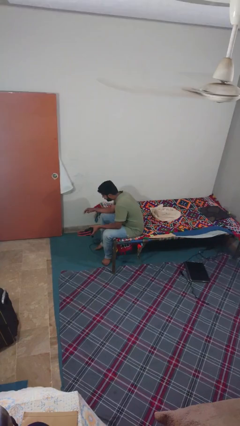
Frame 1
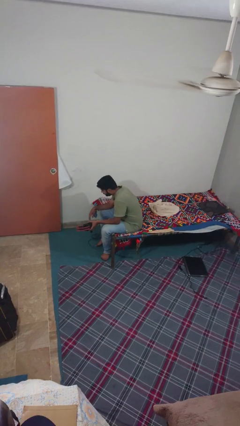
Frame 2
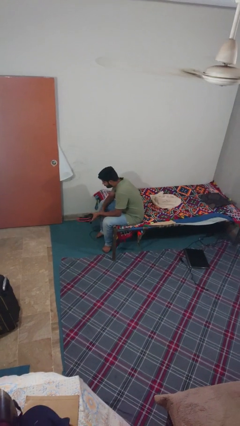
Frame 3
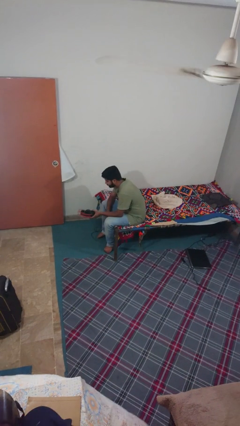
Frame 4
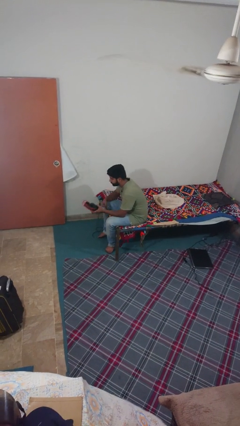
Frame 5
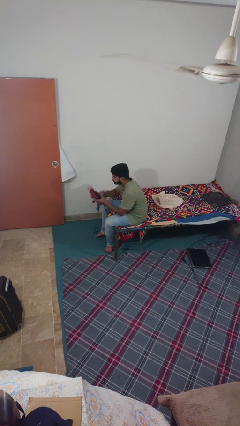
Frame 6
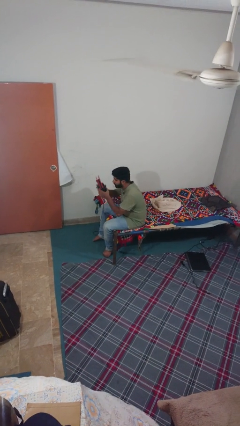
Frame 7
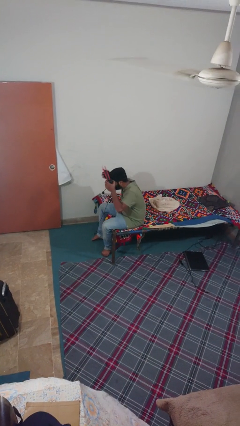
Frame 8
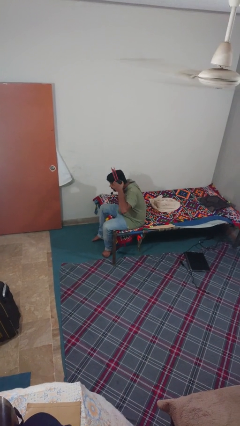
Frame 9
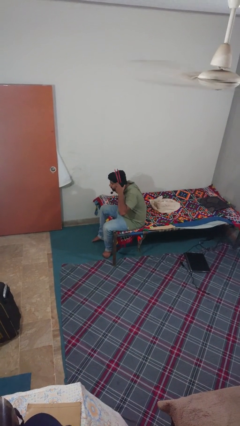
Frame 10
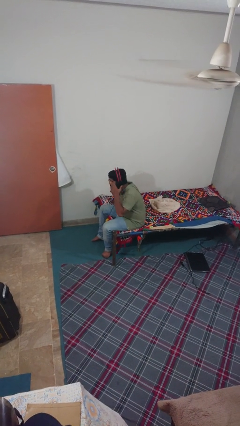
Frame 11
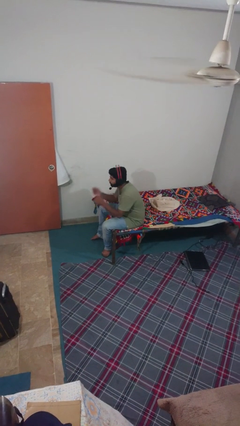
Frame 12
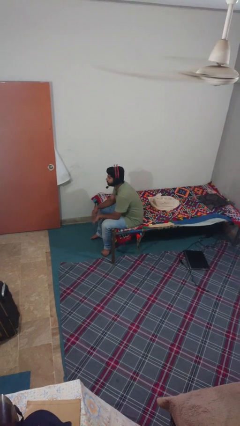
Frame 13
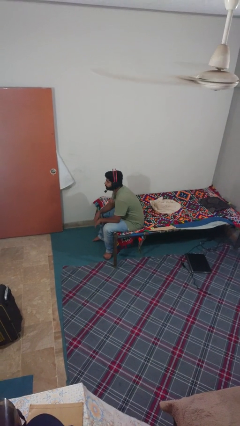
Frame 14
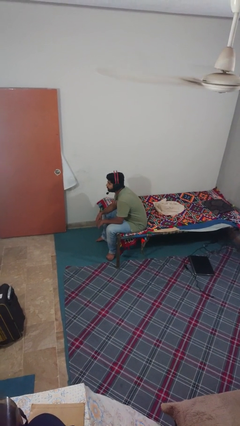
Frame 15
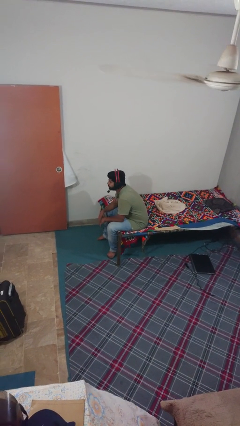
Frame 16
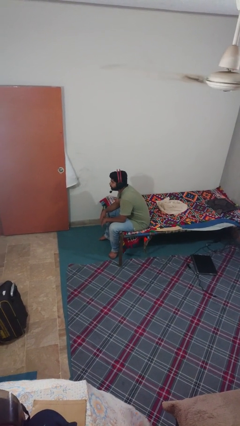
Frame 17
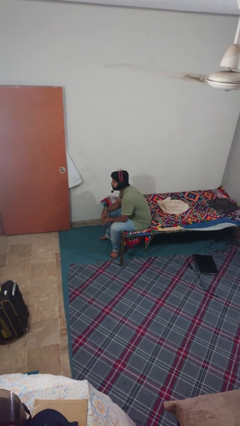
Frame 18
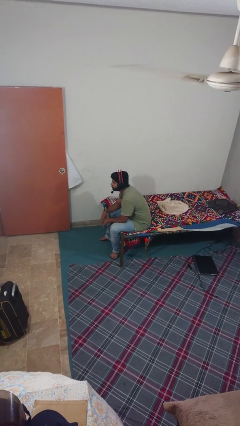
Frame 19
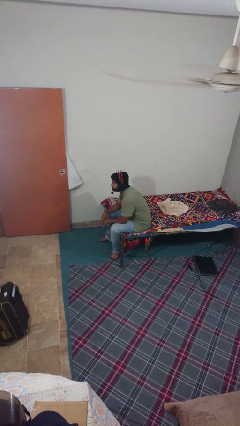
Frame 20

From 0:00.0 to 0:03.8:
person puts on headphones

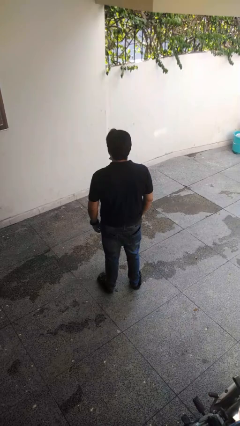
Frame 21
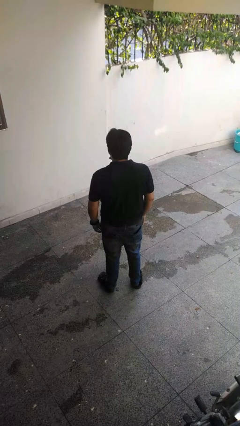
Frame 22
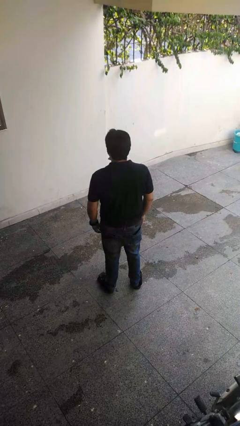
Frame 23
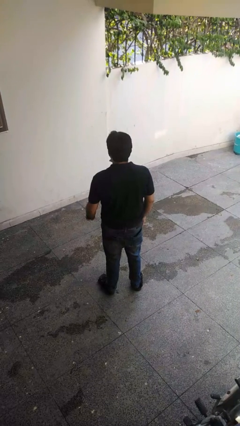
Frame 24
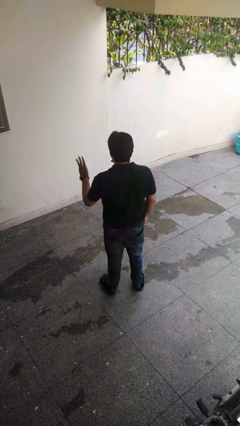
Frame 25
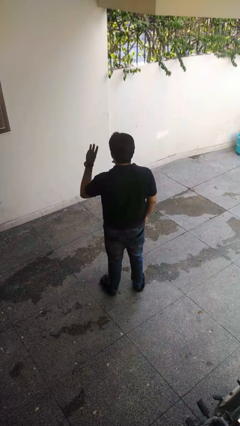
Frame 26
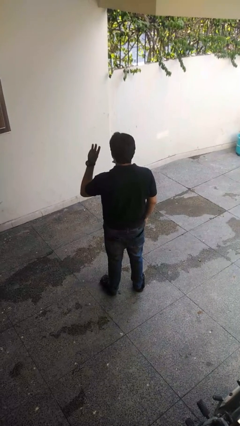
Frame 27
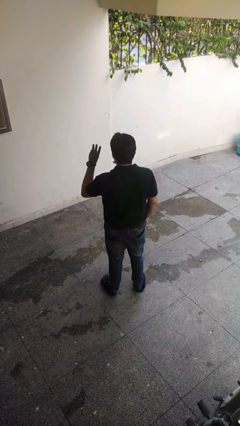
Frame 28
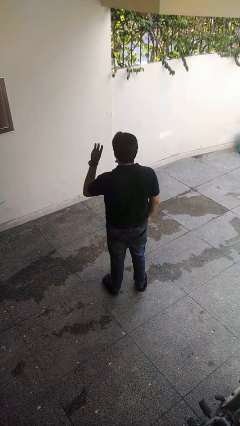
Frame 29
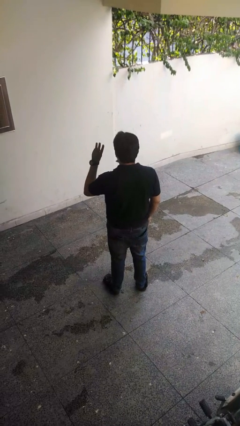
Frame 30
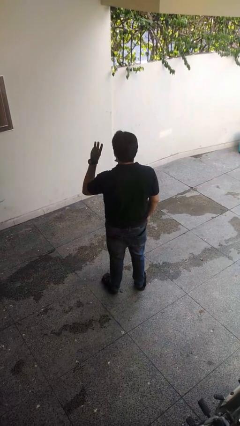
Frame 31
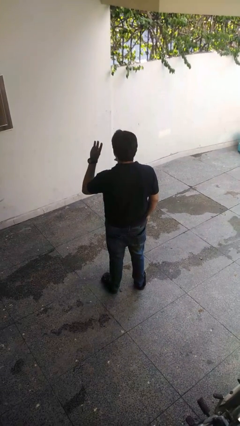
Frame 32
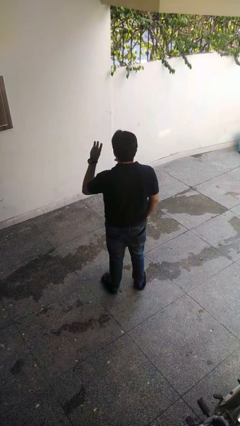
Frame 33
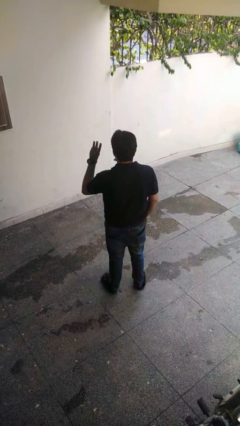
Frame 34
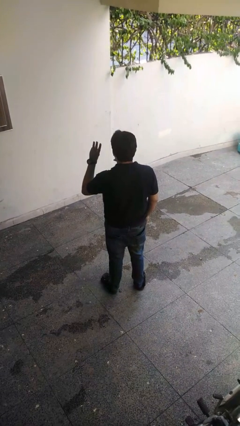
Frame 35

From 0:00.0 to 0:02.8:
person gestures number three

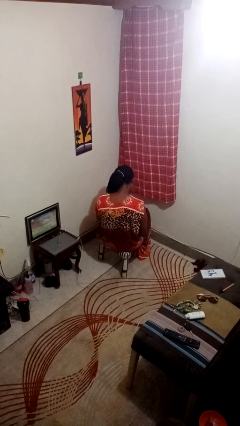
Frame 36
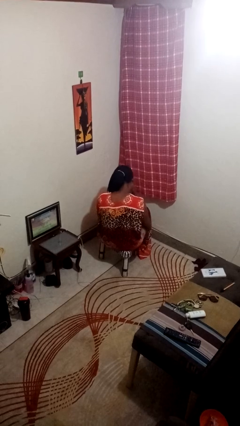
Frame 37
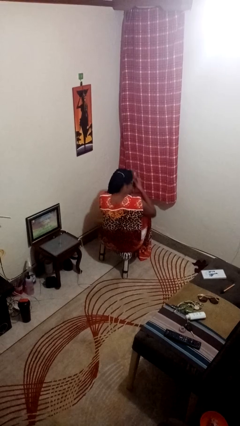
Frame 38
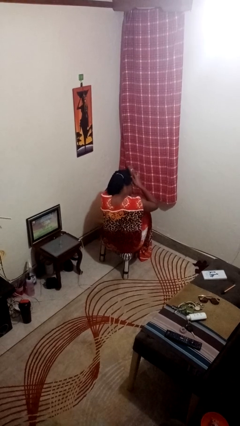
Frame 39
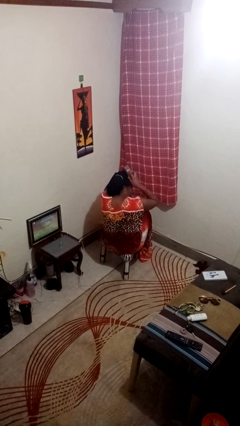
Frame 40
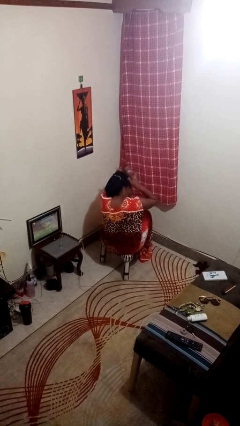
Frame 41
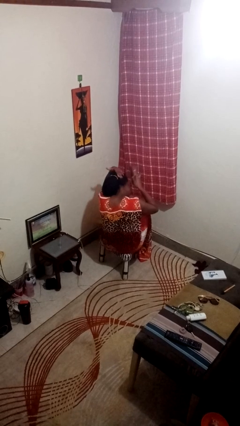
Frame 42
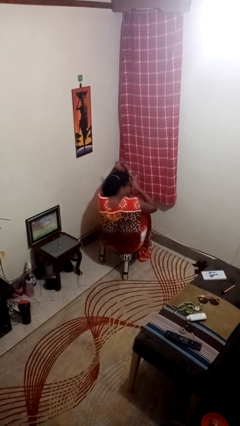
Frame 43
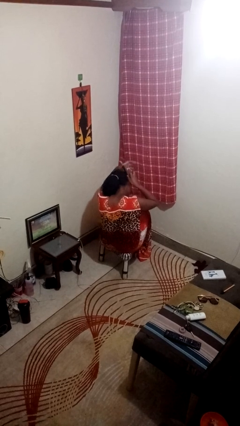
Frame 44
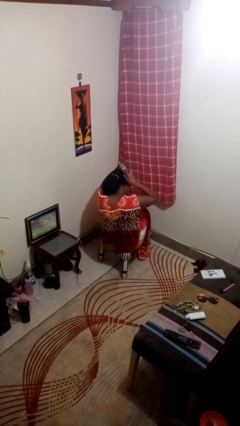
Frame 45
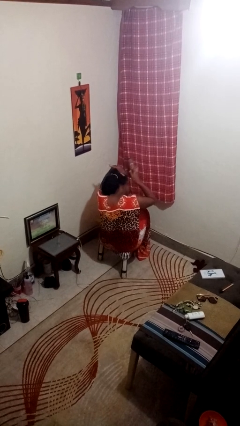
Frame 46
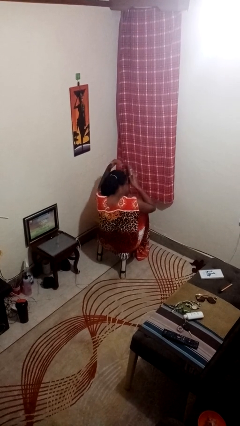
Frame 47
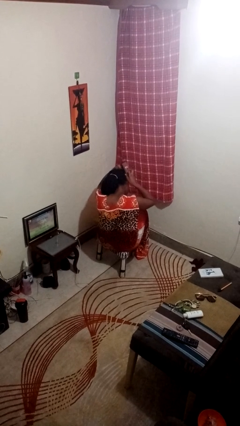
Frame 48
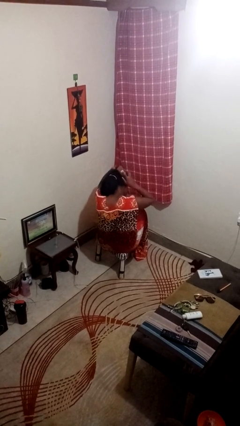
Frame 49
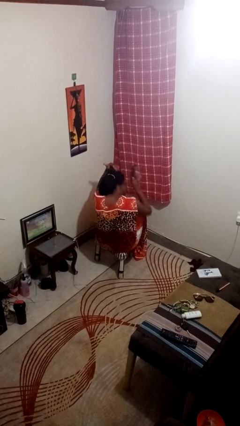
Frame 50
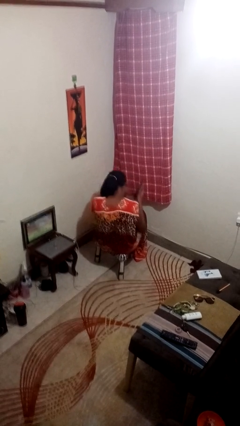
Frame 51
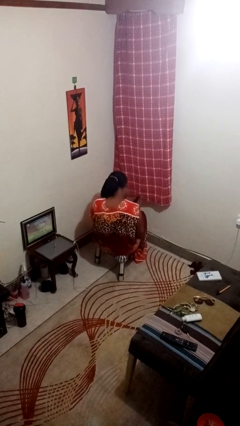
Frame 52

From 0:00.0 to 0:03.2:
person brushes hair

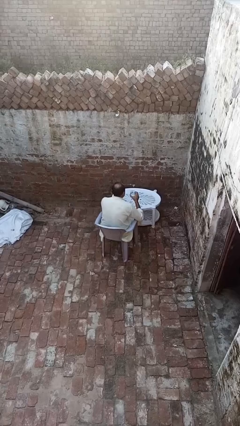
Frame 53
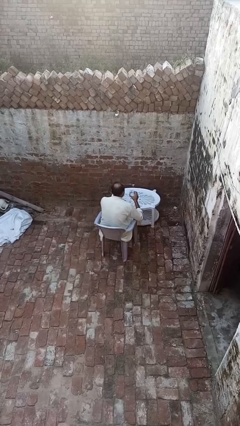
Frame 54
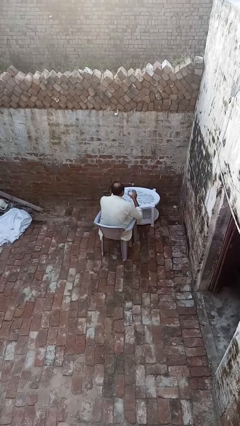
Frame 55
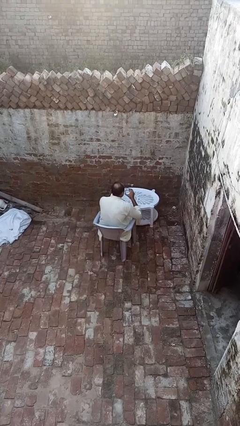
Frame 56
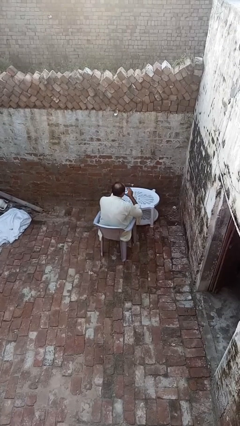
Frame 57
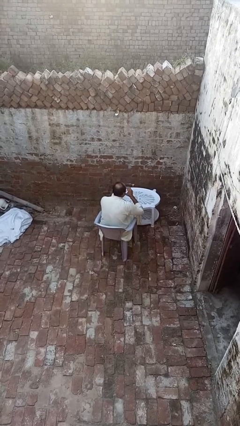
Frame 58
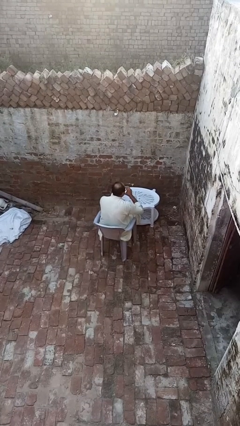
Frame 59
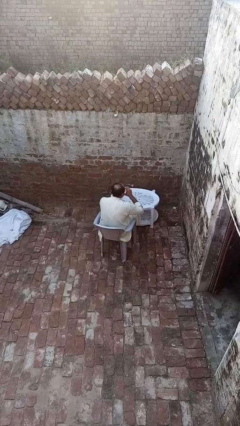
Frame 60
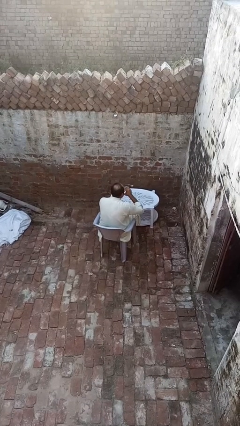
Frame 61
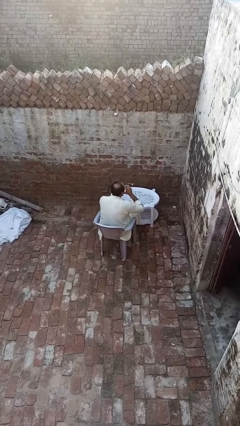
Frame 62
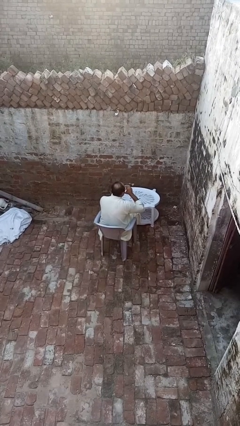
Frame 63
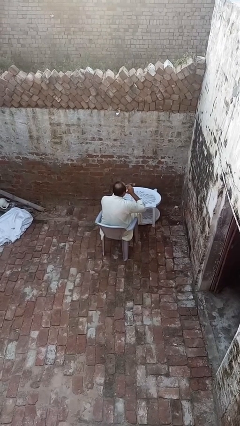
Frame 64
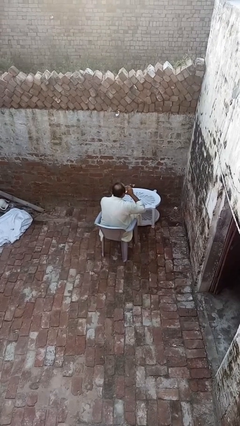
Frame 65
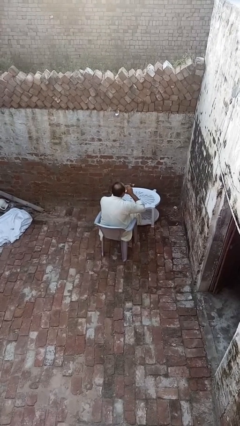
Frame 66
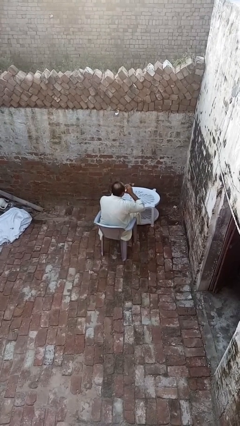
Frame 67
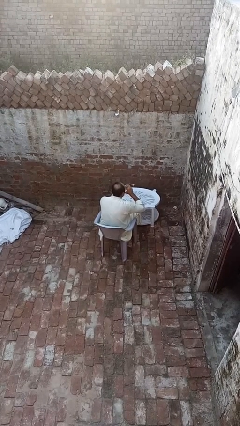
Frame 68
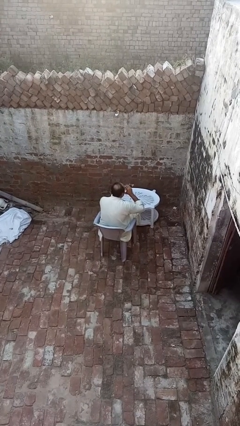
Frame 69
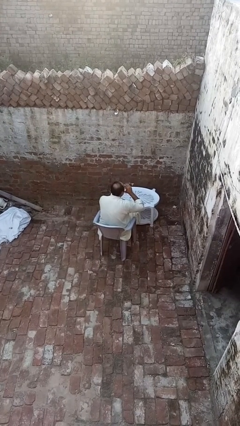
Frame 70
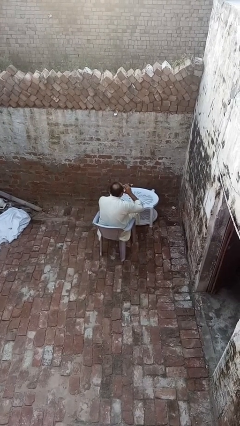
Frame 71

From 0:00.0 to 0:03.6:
person drinks from shotglass

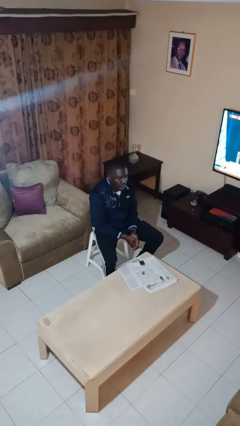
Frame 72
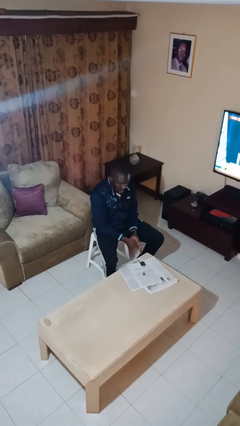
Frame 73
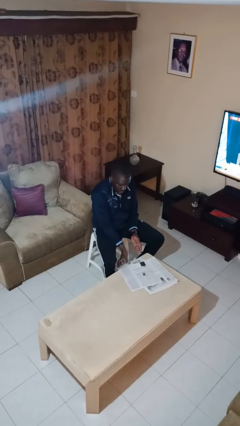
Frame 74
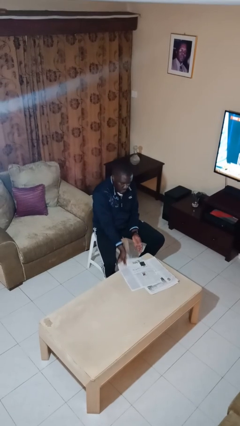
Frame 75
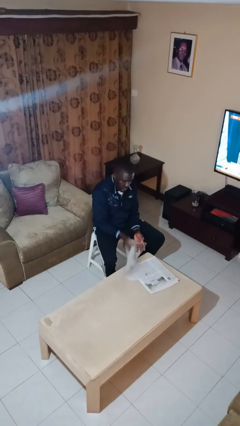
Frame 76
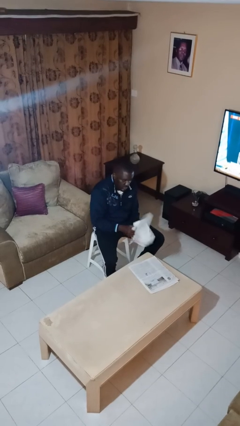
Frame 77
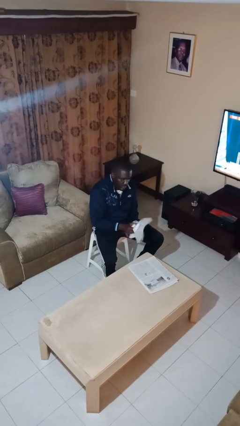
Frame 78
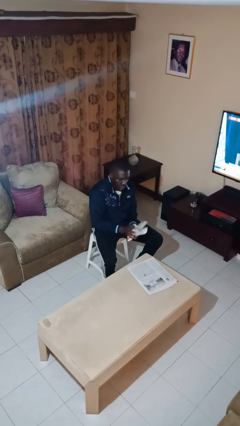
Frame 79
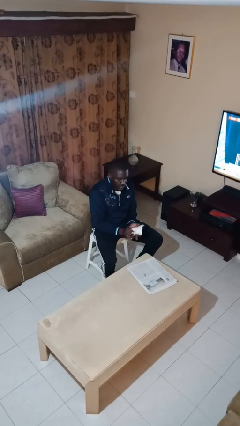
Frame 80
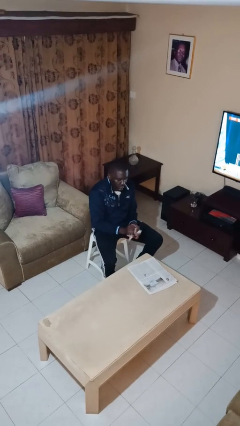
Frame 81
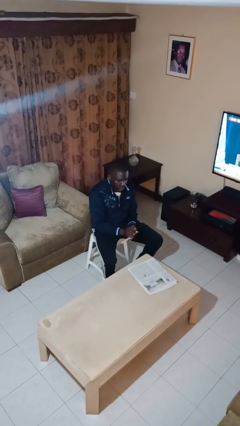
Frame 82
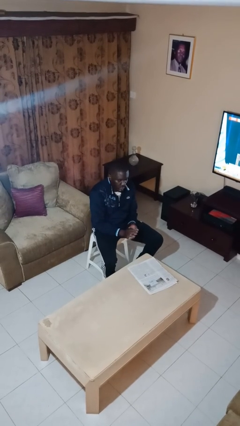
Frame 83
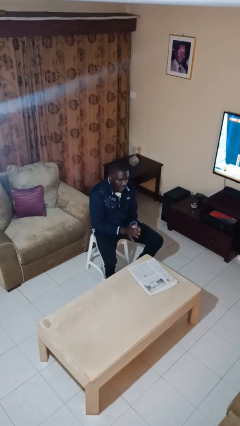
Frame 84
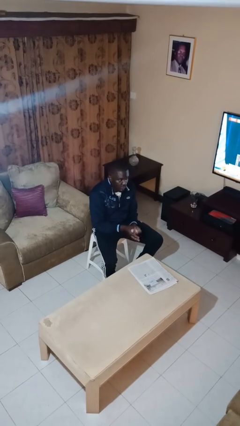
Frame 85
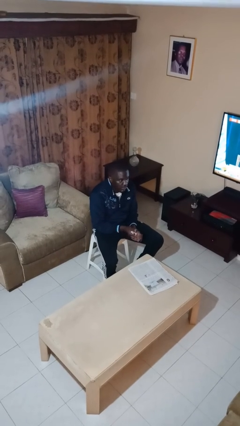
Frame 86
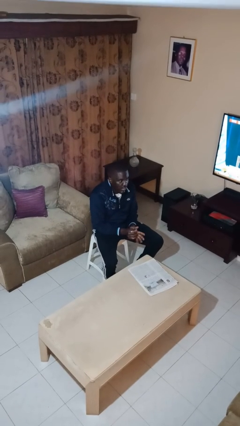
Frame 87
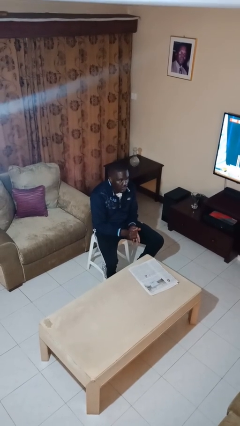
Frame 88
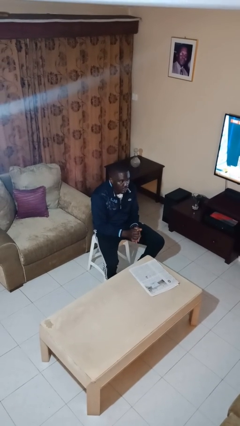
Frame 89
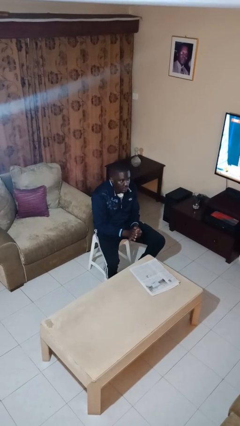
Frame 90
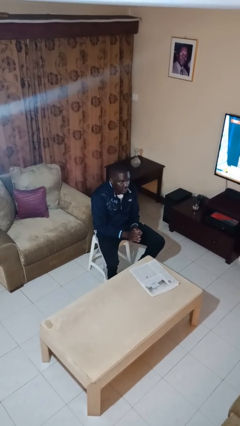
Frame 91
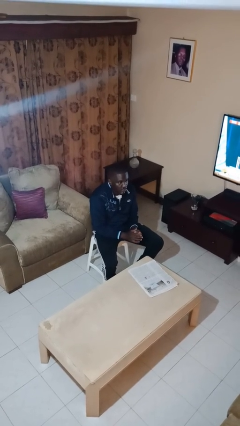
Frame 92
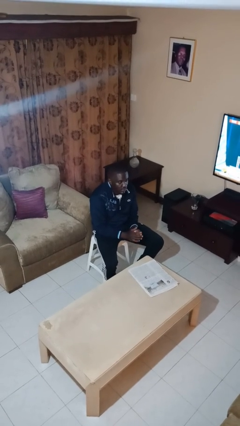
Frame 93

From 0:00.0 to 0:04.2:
person crumples paper

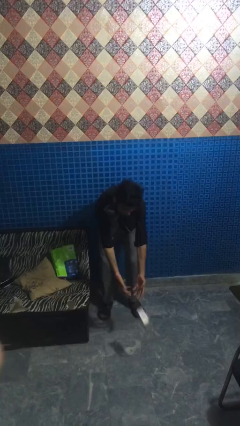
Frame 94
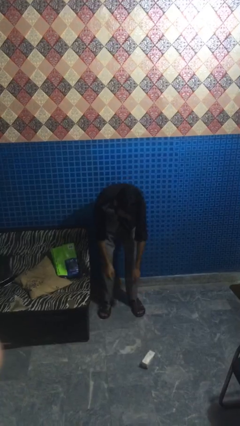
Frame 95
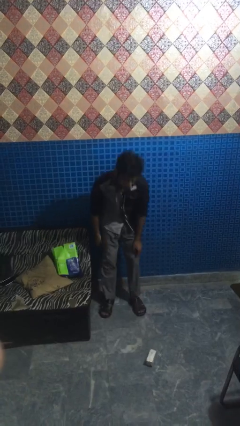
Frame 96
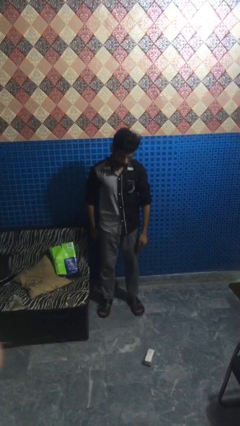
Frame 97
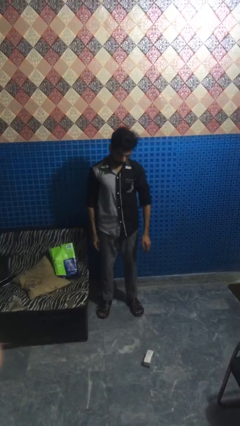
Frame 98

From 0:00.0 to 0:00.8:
person catches dropped object
